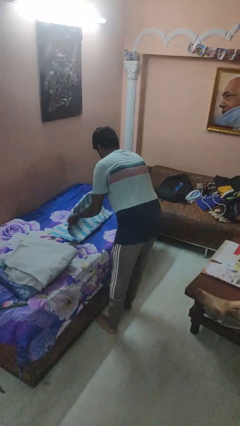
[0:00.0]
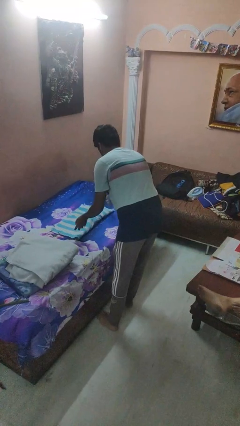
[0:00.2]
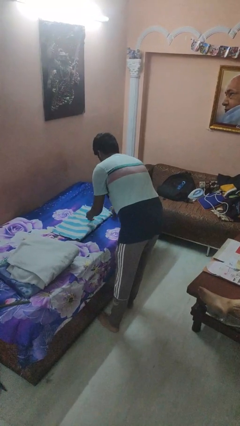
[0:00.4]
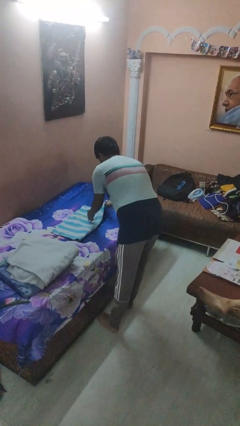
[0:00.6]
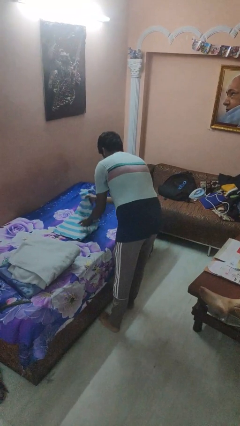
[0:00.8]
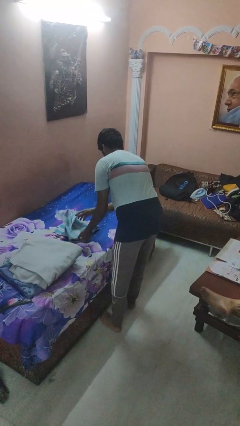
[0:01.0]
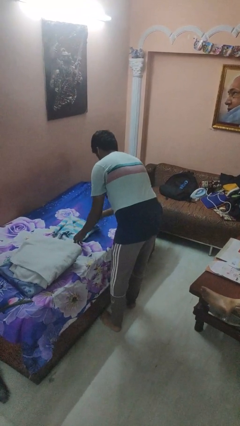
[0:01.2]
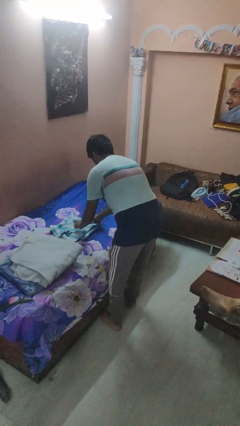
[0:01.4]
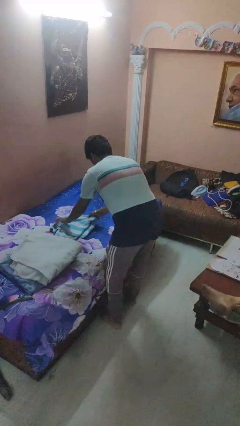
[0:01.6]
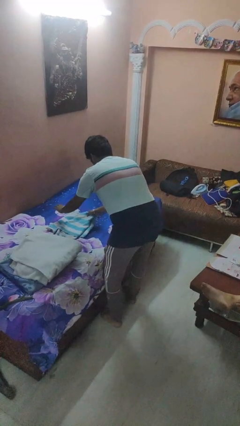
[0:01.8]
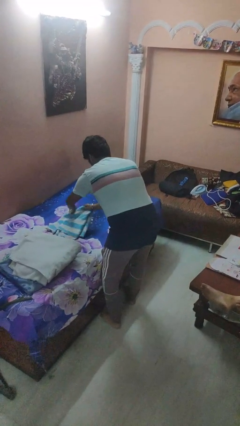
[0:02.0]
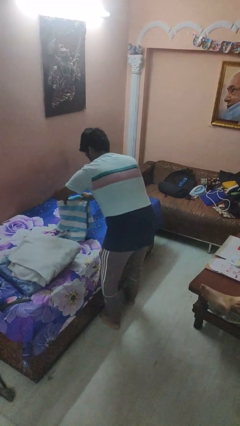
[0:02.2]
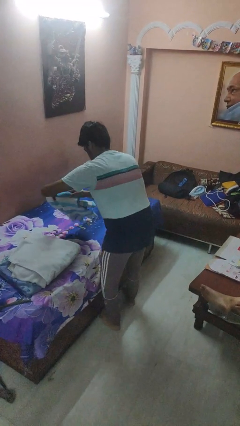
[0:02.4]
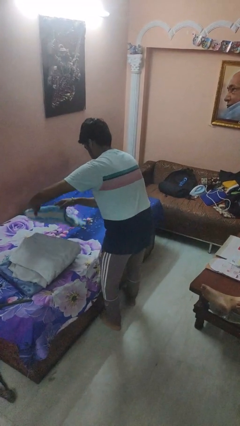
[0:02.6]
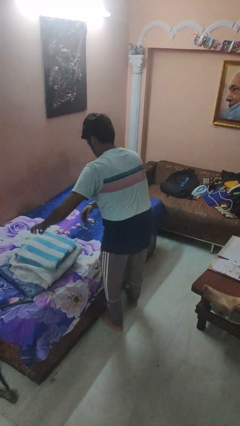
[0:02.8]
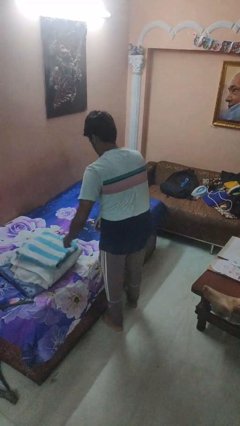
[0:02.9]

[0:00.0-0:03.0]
person folds towel

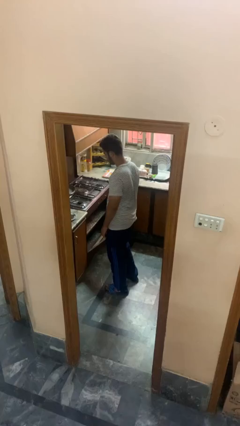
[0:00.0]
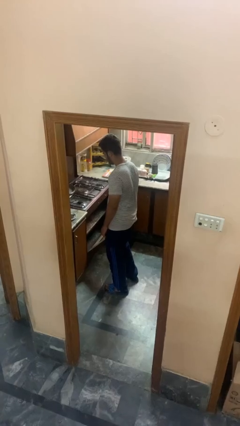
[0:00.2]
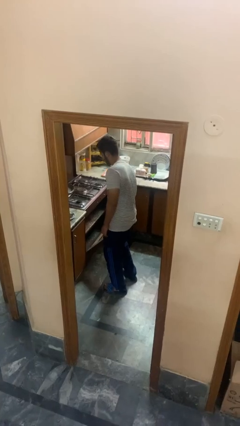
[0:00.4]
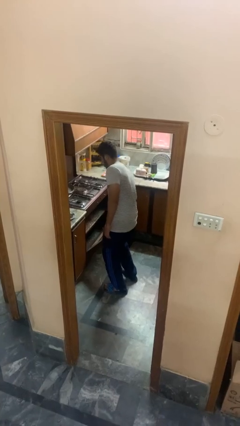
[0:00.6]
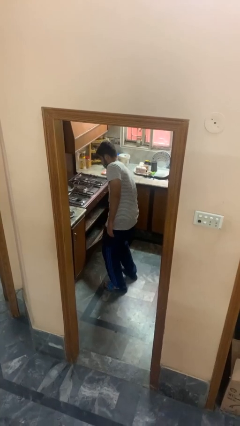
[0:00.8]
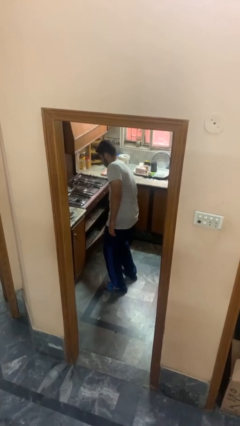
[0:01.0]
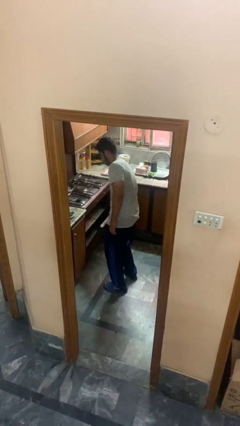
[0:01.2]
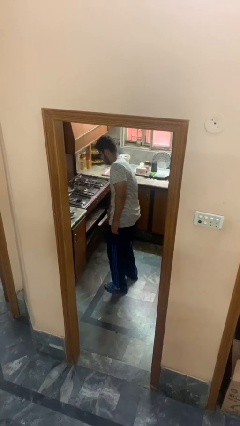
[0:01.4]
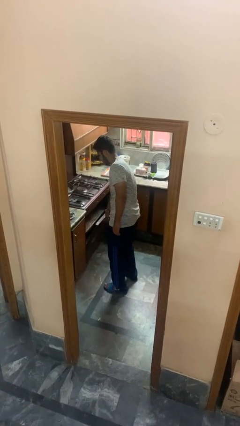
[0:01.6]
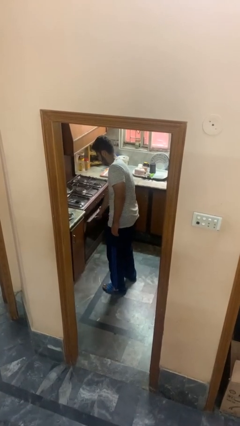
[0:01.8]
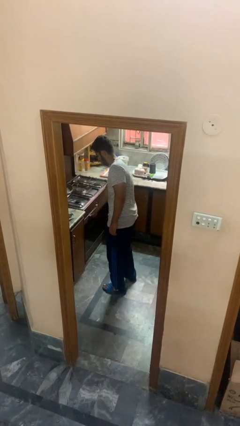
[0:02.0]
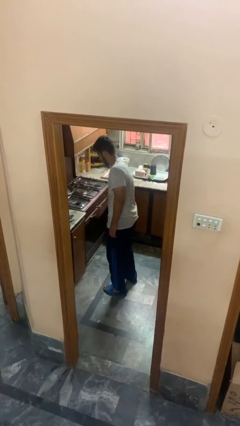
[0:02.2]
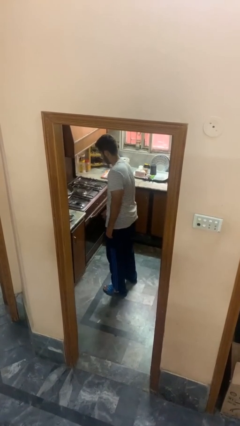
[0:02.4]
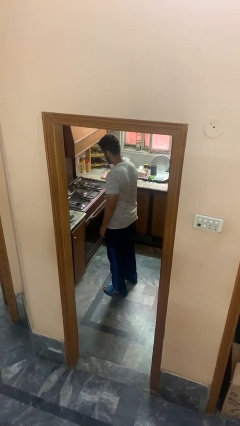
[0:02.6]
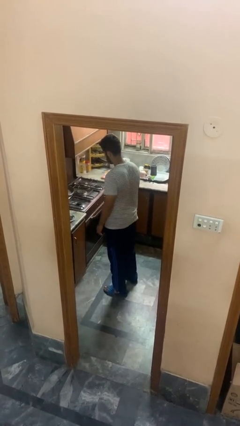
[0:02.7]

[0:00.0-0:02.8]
person closes oven door

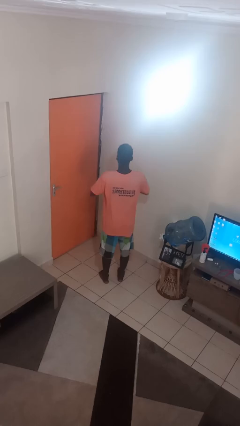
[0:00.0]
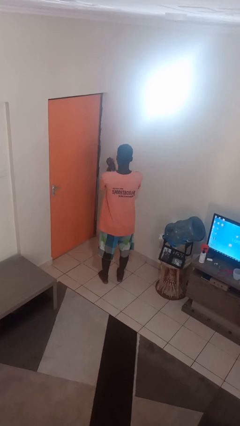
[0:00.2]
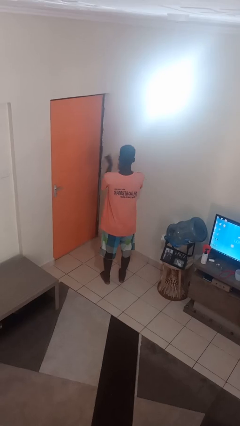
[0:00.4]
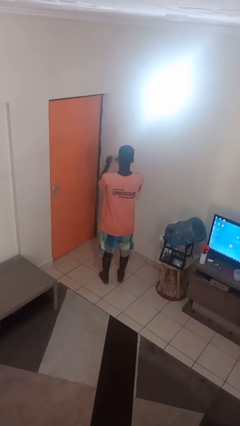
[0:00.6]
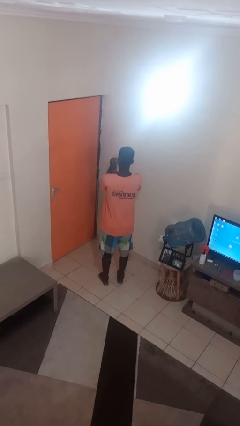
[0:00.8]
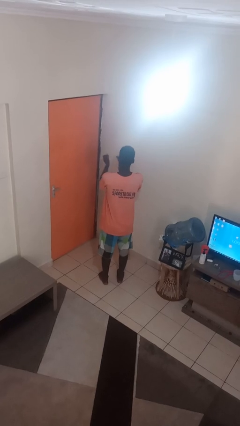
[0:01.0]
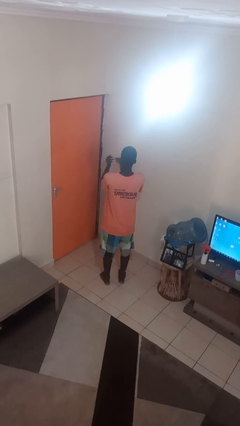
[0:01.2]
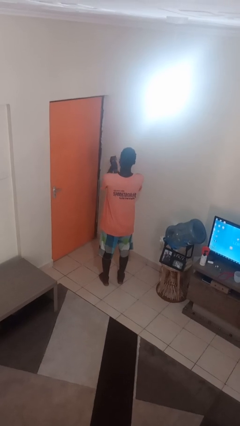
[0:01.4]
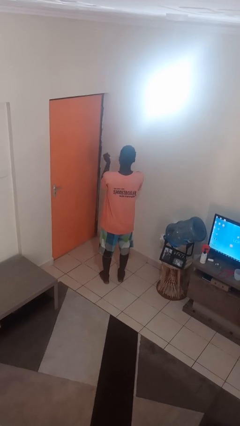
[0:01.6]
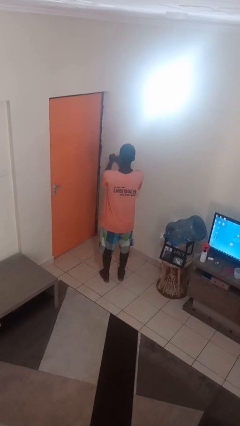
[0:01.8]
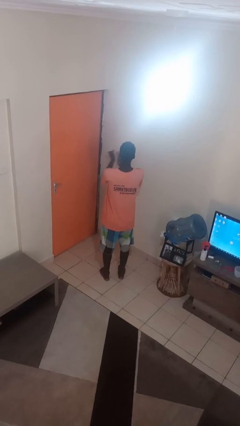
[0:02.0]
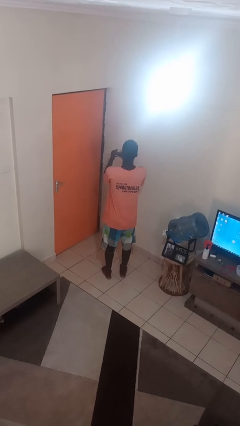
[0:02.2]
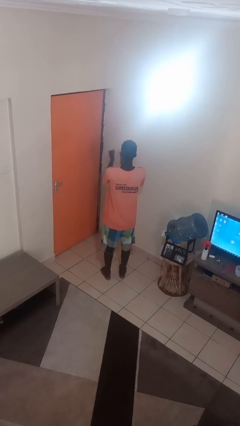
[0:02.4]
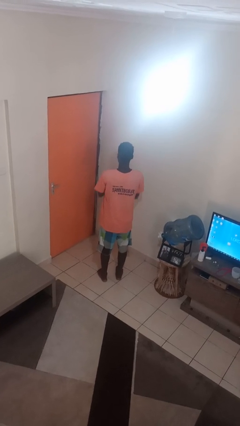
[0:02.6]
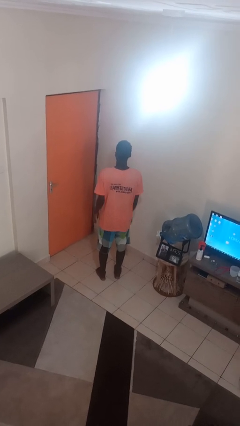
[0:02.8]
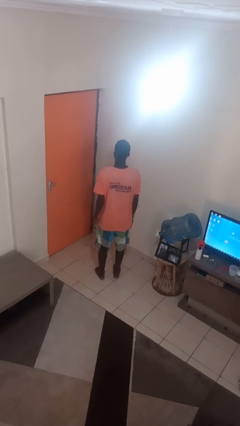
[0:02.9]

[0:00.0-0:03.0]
person claps hands

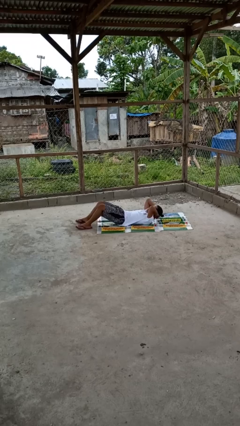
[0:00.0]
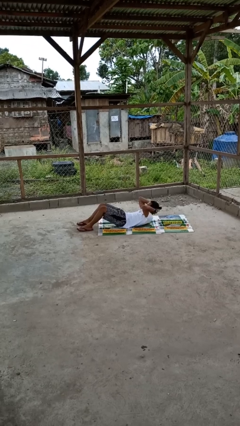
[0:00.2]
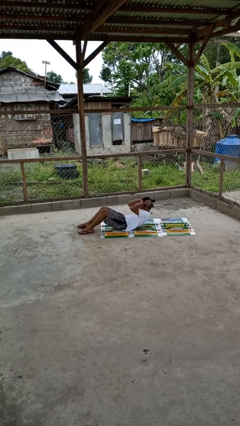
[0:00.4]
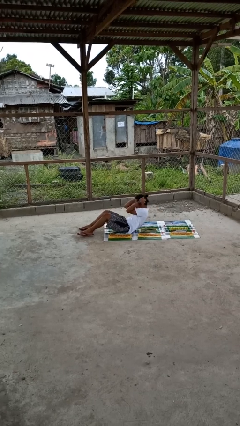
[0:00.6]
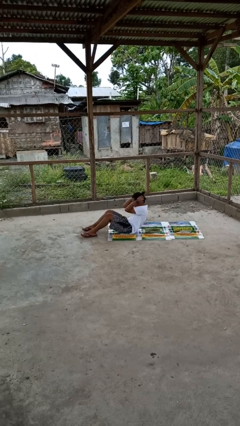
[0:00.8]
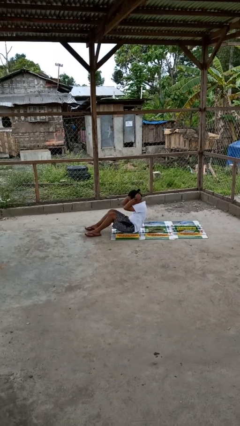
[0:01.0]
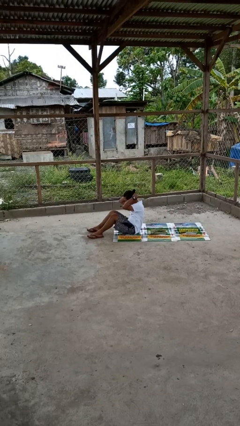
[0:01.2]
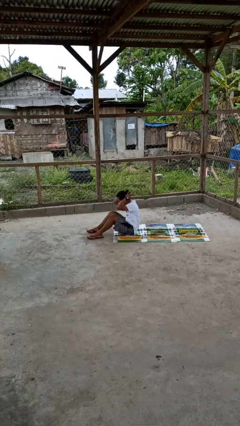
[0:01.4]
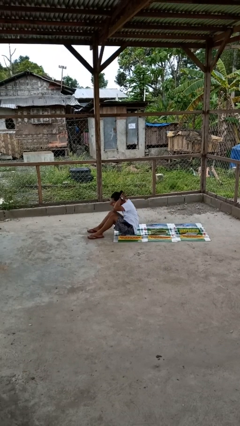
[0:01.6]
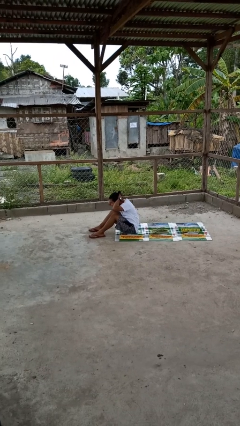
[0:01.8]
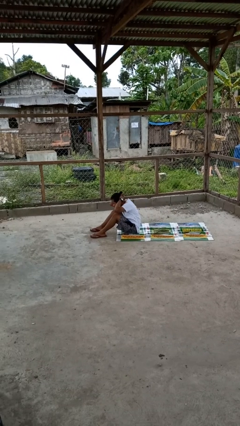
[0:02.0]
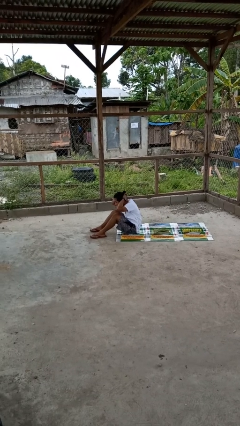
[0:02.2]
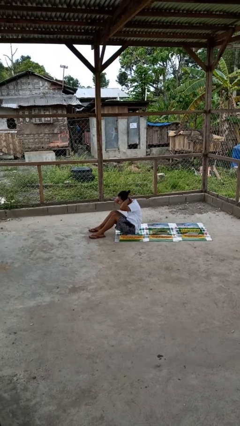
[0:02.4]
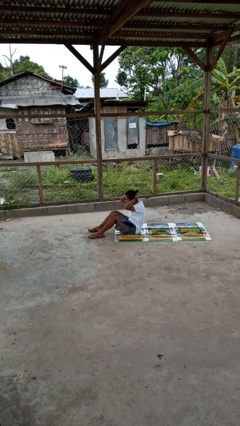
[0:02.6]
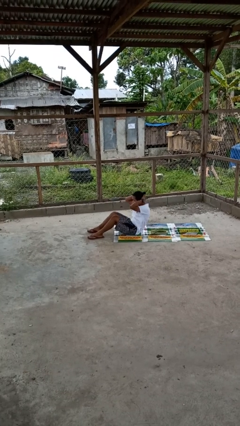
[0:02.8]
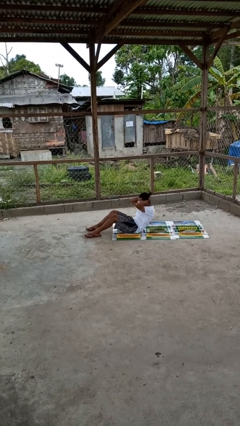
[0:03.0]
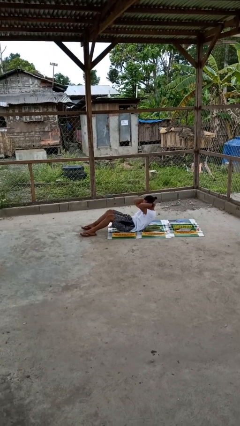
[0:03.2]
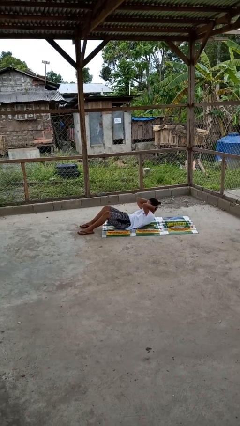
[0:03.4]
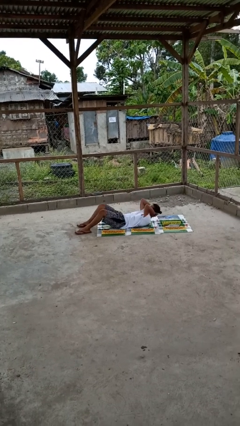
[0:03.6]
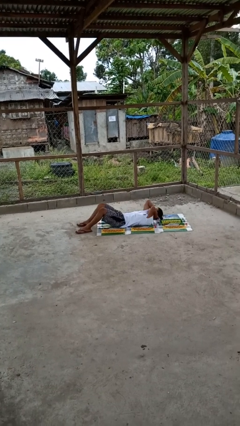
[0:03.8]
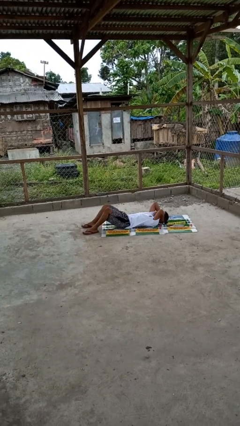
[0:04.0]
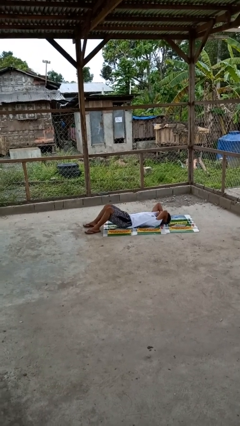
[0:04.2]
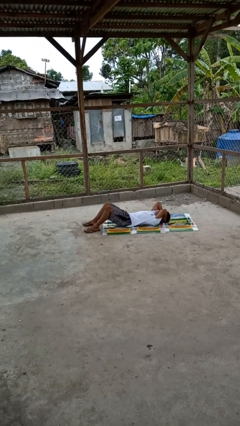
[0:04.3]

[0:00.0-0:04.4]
person exercises with situp

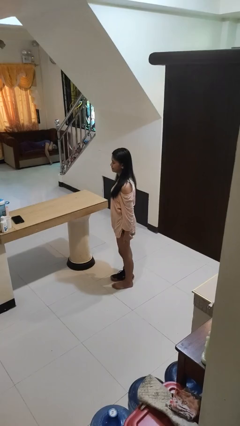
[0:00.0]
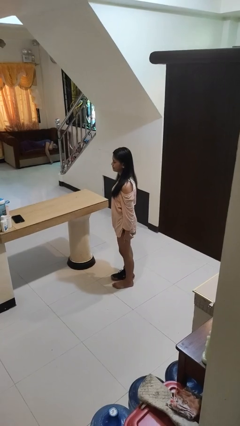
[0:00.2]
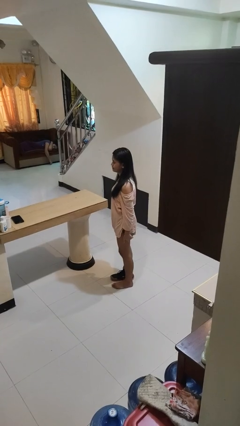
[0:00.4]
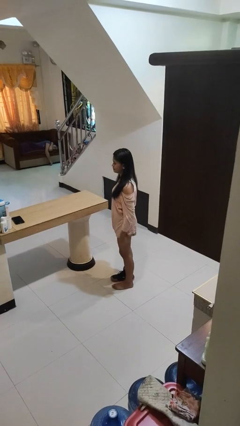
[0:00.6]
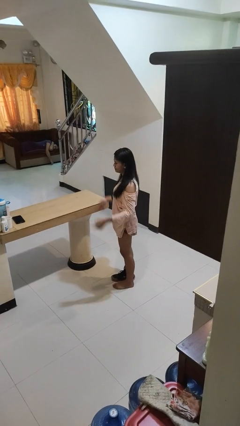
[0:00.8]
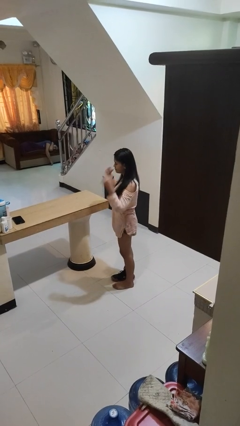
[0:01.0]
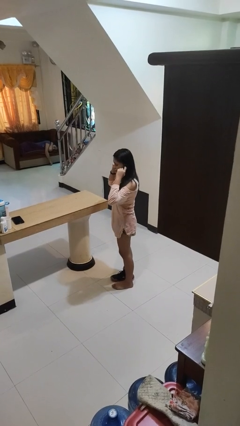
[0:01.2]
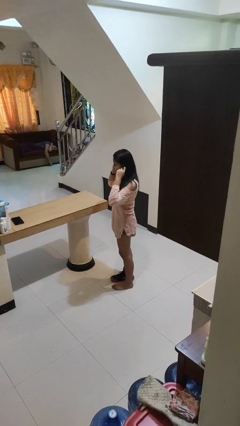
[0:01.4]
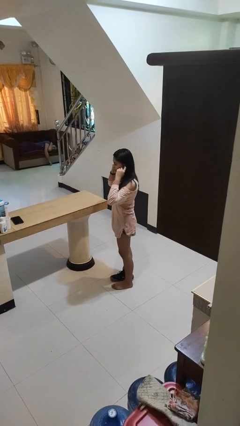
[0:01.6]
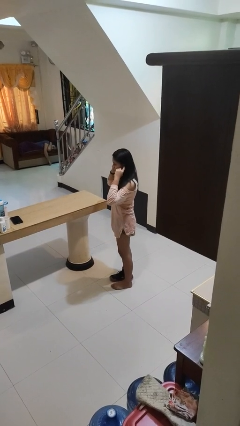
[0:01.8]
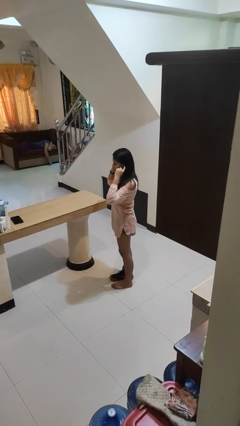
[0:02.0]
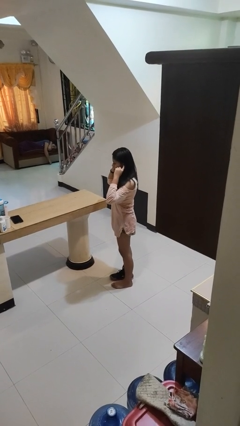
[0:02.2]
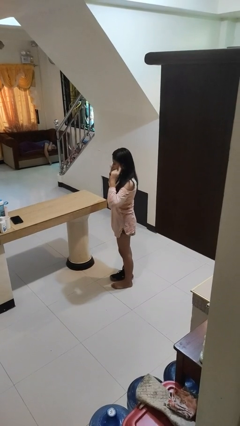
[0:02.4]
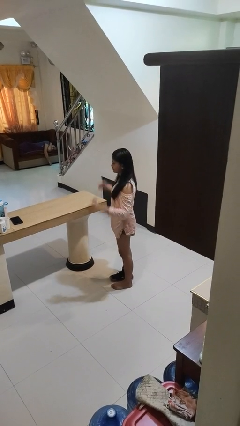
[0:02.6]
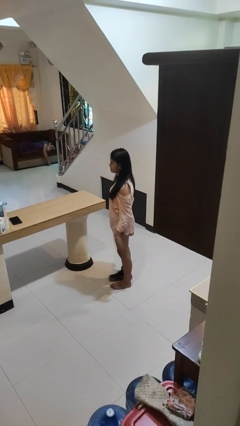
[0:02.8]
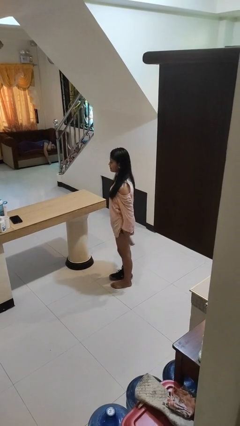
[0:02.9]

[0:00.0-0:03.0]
person puts fingers in ear

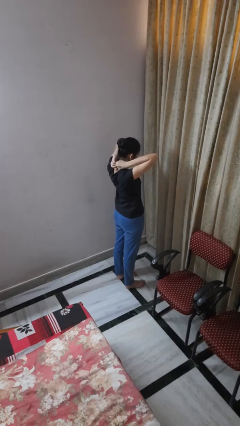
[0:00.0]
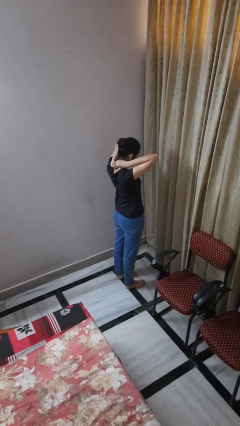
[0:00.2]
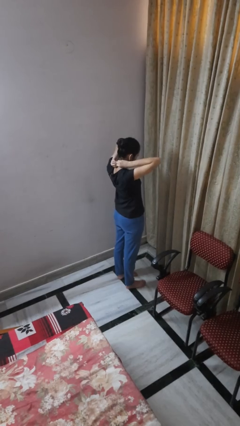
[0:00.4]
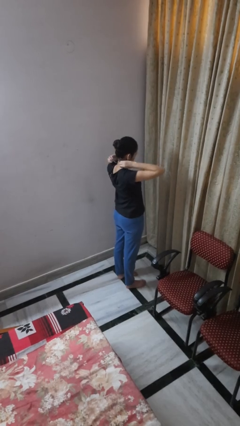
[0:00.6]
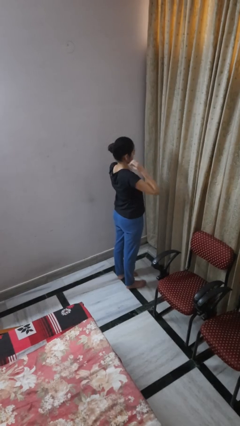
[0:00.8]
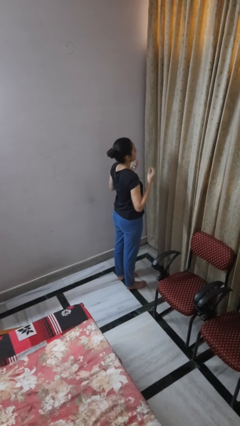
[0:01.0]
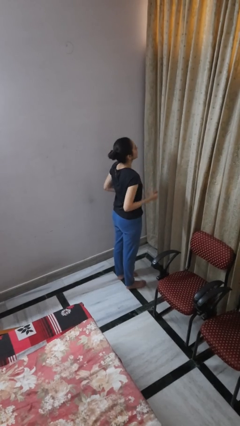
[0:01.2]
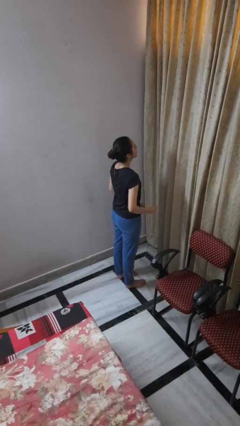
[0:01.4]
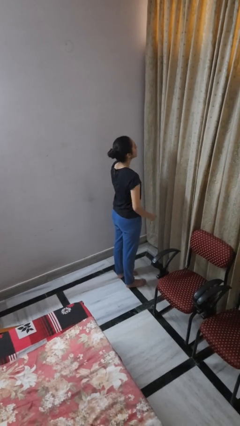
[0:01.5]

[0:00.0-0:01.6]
person takes off necklace
